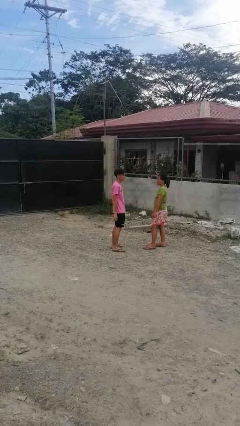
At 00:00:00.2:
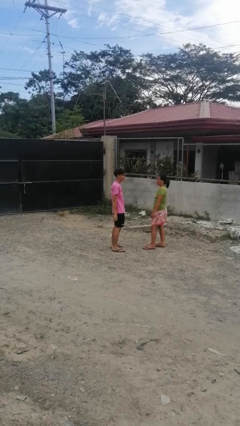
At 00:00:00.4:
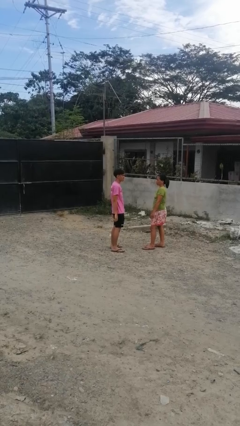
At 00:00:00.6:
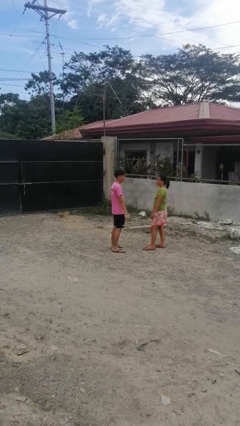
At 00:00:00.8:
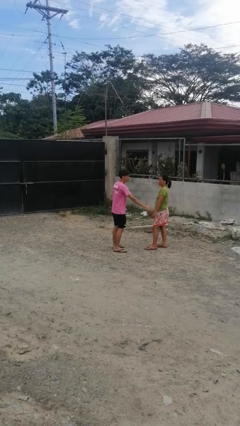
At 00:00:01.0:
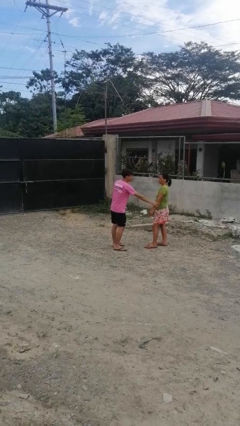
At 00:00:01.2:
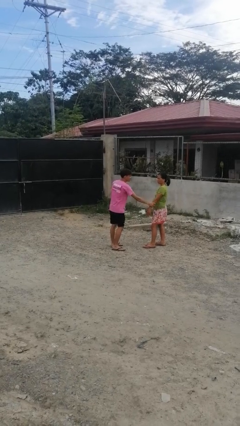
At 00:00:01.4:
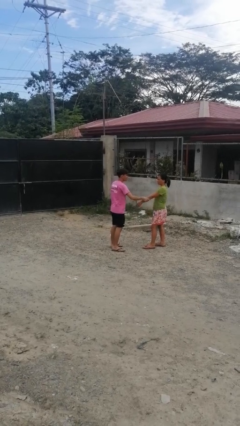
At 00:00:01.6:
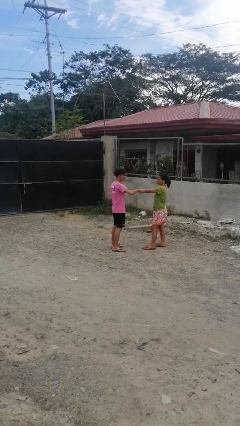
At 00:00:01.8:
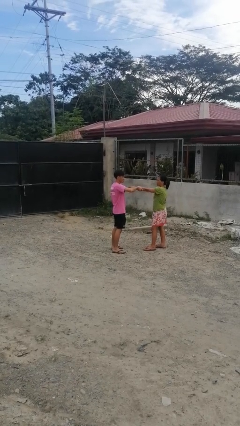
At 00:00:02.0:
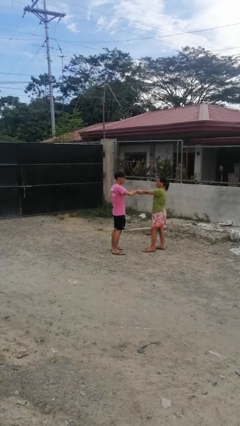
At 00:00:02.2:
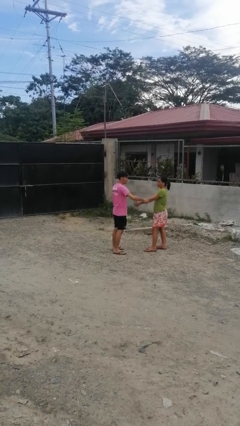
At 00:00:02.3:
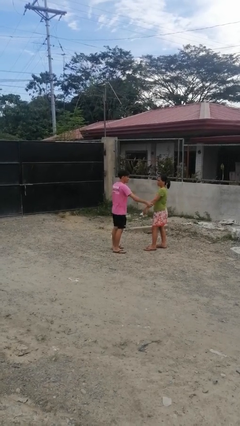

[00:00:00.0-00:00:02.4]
person grabs person by forearm

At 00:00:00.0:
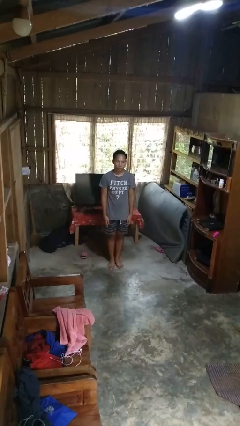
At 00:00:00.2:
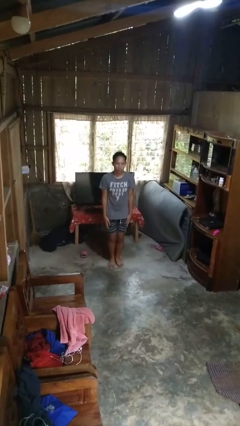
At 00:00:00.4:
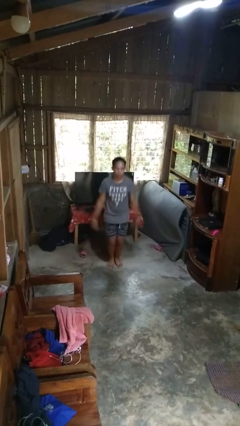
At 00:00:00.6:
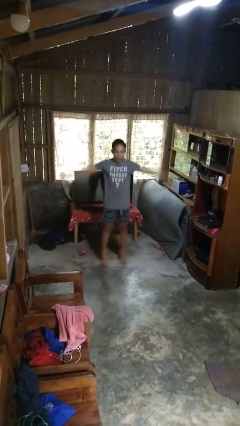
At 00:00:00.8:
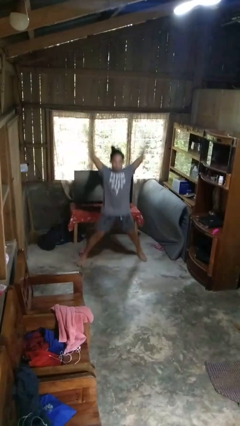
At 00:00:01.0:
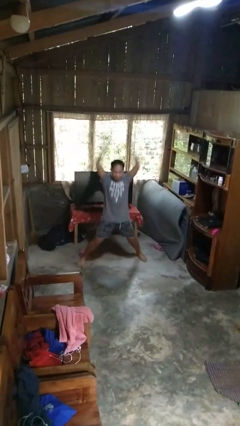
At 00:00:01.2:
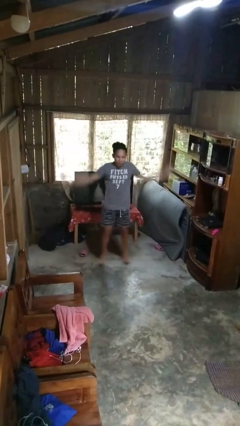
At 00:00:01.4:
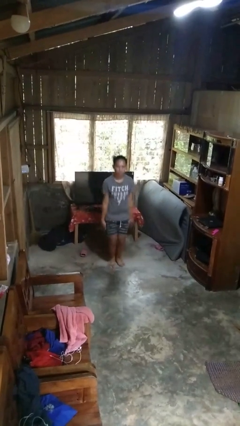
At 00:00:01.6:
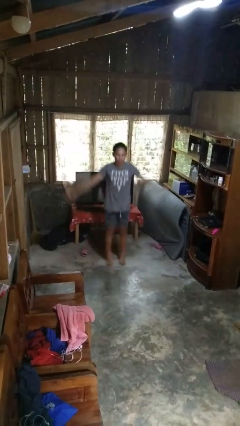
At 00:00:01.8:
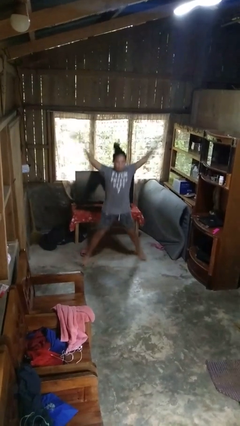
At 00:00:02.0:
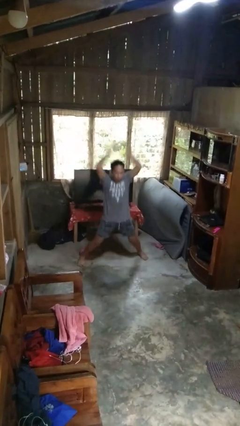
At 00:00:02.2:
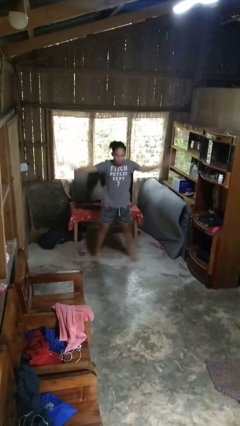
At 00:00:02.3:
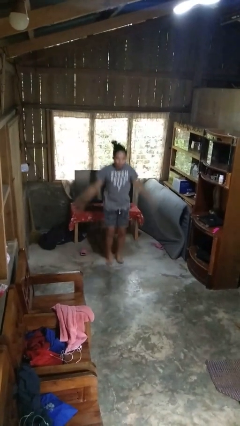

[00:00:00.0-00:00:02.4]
person exercises with jumping jacks

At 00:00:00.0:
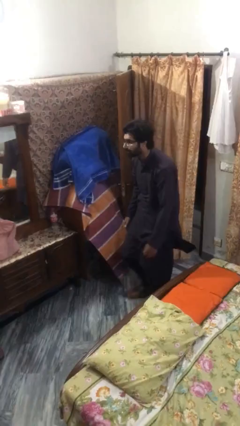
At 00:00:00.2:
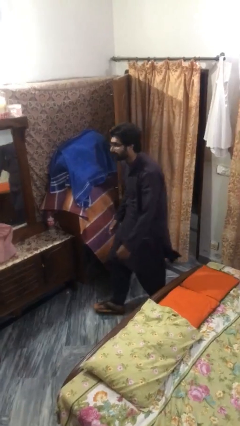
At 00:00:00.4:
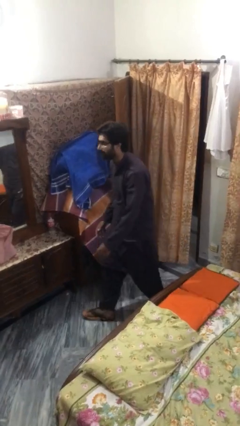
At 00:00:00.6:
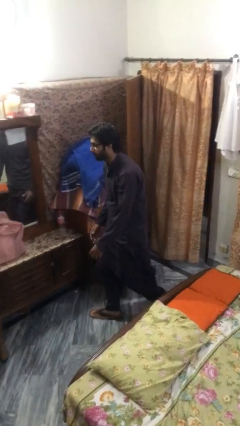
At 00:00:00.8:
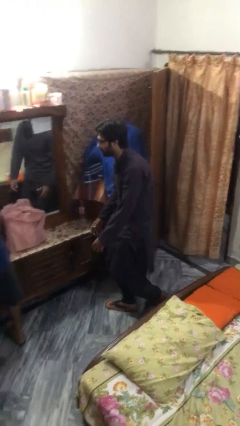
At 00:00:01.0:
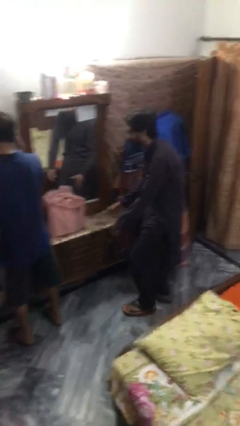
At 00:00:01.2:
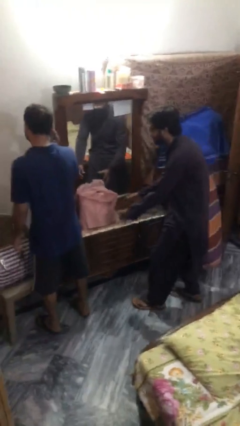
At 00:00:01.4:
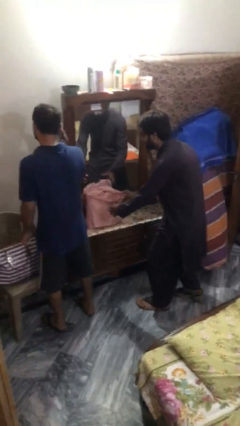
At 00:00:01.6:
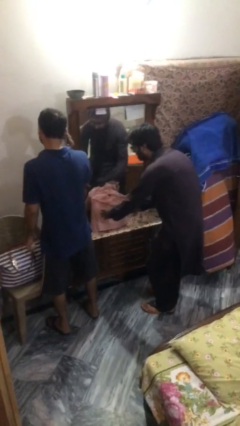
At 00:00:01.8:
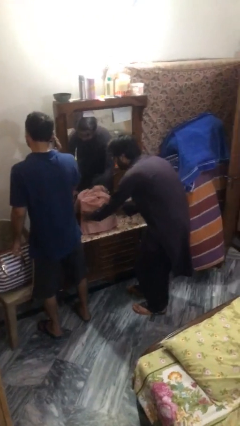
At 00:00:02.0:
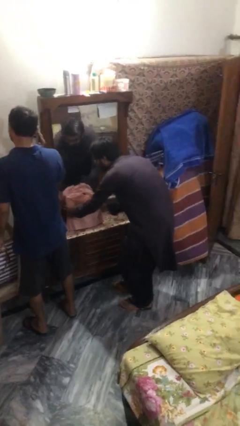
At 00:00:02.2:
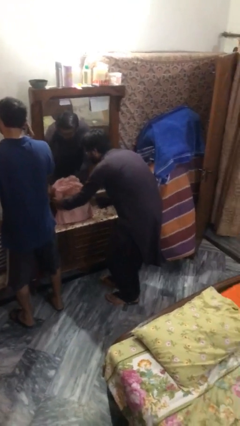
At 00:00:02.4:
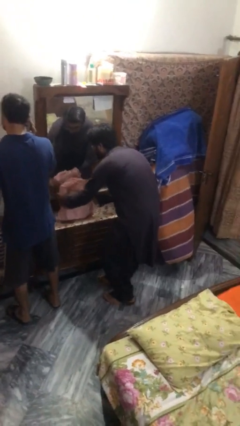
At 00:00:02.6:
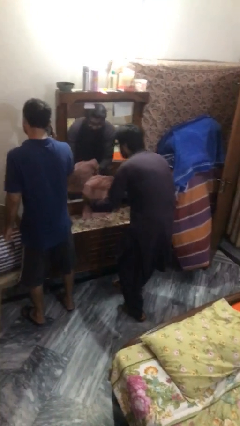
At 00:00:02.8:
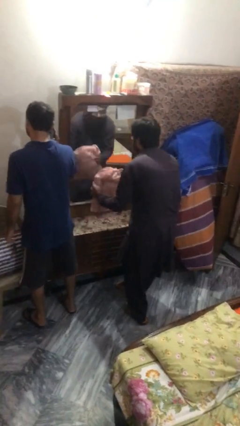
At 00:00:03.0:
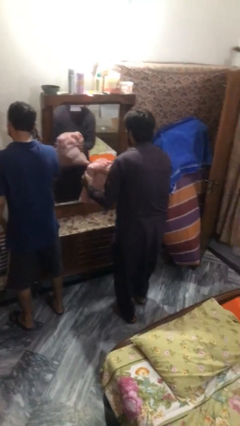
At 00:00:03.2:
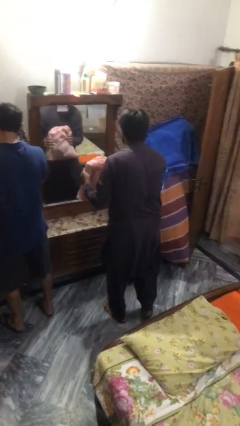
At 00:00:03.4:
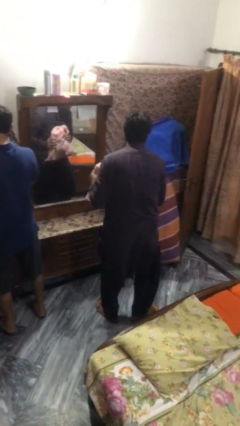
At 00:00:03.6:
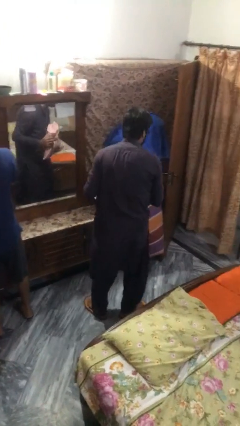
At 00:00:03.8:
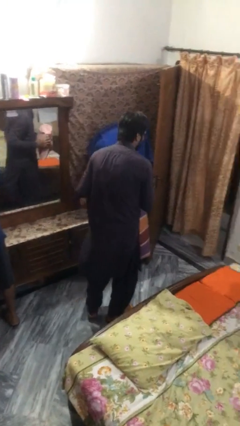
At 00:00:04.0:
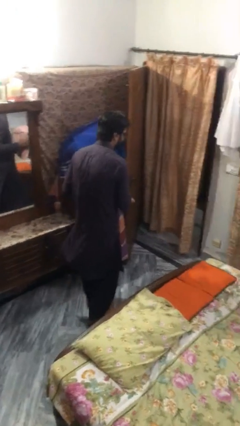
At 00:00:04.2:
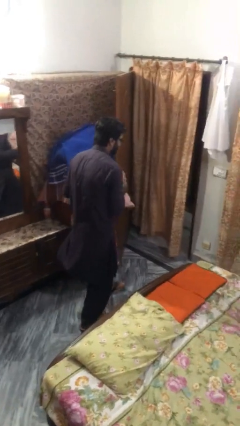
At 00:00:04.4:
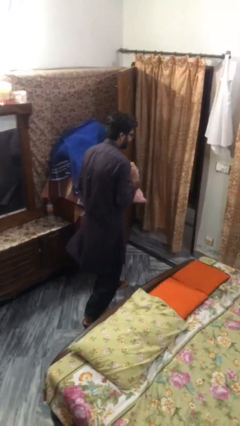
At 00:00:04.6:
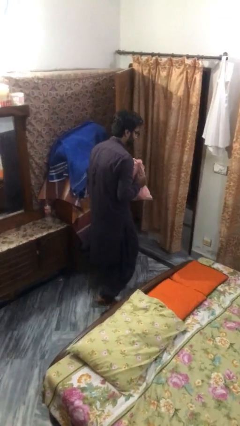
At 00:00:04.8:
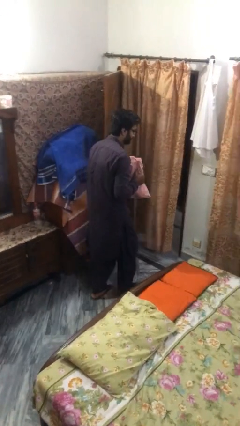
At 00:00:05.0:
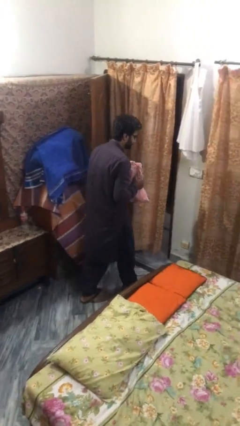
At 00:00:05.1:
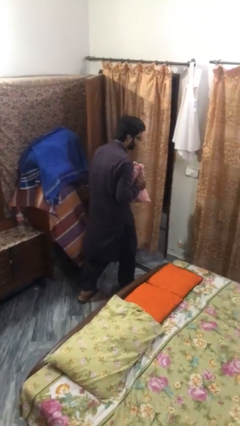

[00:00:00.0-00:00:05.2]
person steals object from person

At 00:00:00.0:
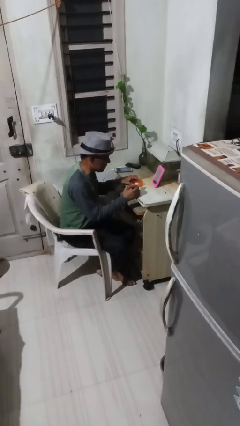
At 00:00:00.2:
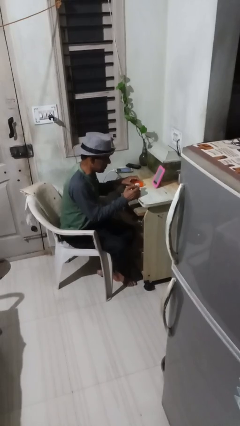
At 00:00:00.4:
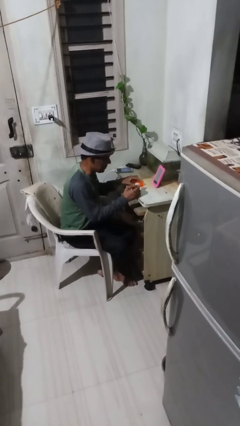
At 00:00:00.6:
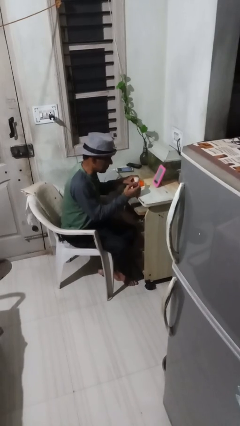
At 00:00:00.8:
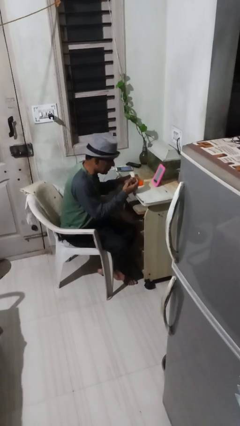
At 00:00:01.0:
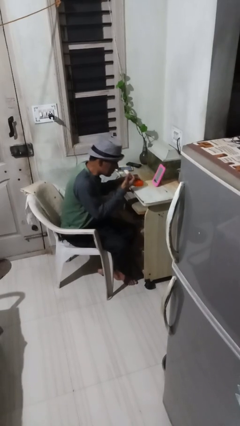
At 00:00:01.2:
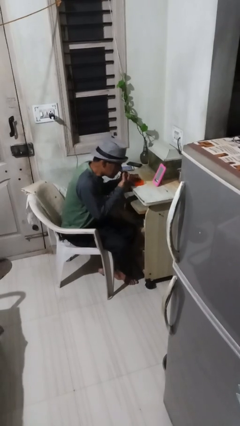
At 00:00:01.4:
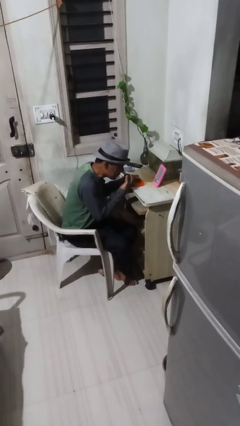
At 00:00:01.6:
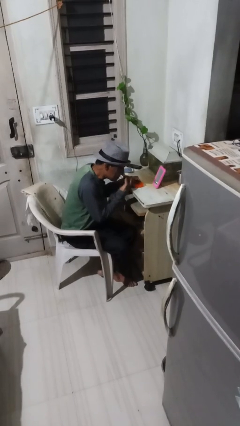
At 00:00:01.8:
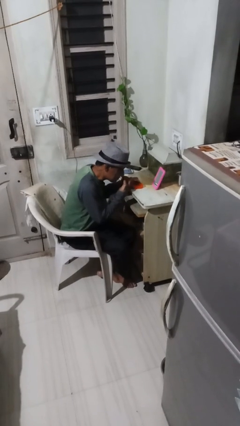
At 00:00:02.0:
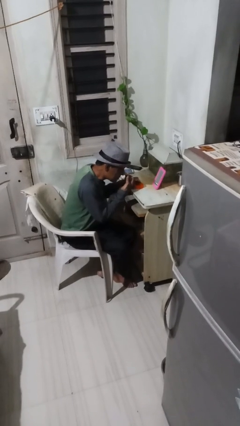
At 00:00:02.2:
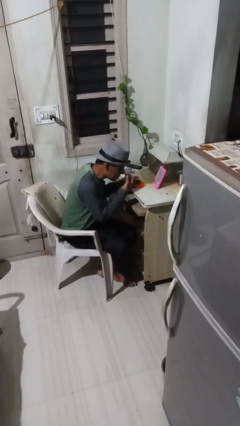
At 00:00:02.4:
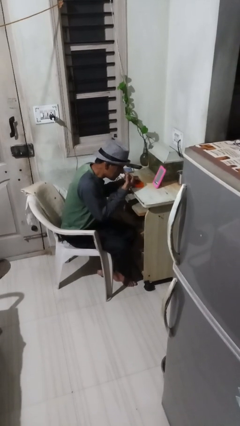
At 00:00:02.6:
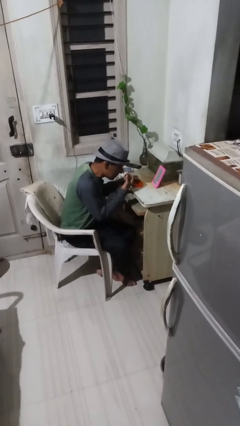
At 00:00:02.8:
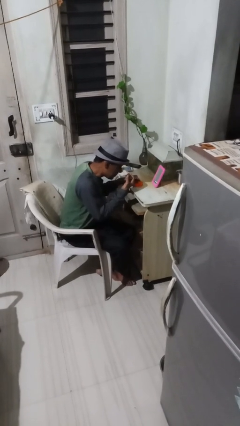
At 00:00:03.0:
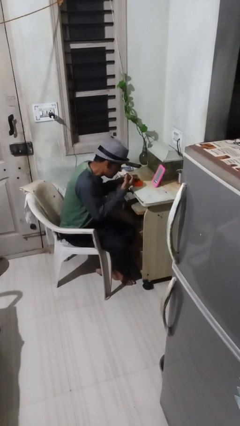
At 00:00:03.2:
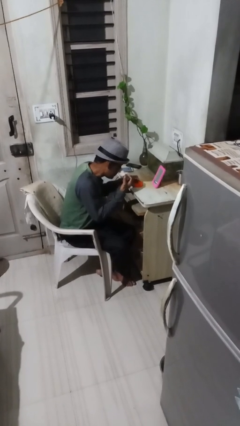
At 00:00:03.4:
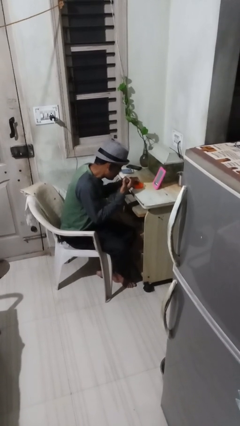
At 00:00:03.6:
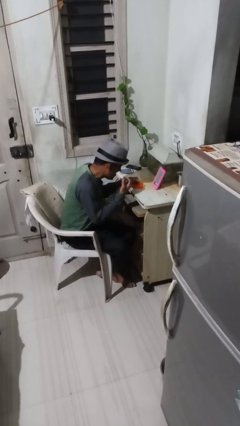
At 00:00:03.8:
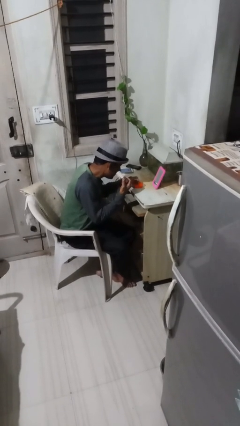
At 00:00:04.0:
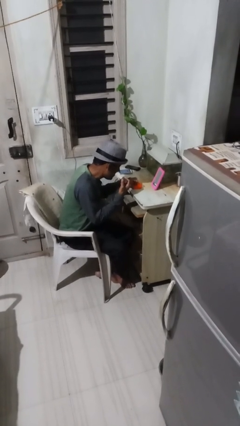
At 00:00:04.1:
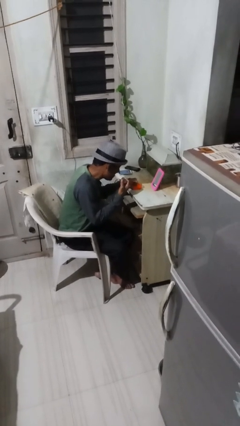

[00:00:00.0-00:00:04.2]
person applies foundation makeup

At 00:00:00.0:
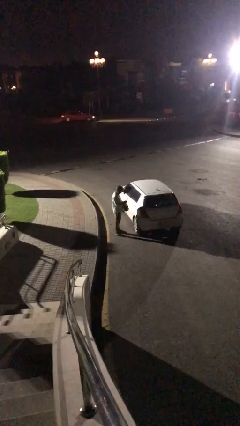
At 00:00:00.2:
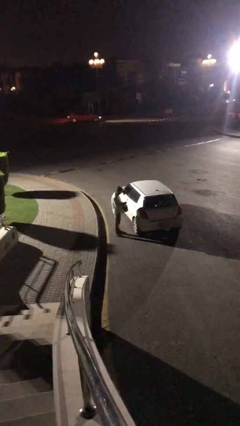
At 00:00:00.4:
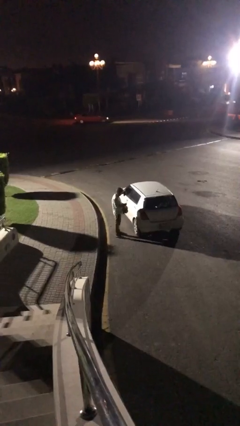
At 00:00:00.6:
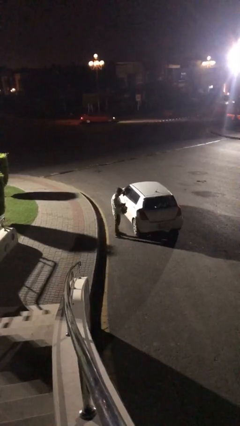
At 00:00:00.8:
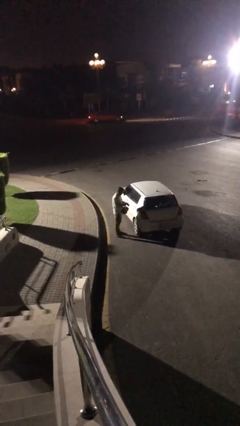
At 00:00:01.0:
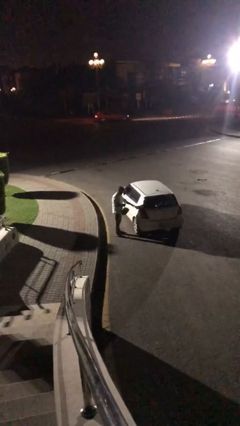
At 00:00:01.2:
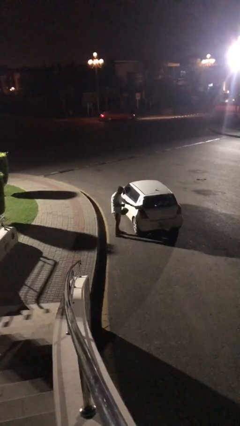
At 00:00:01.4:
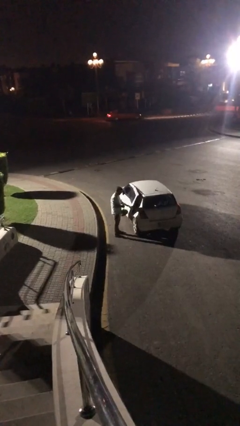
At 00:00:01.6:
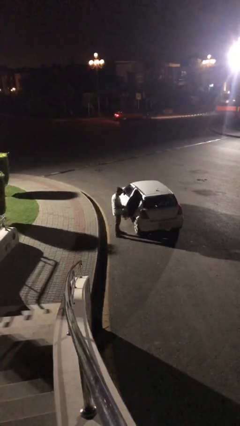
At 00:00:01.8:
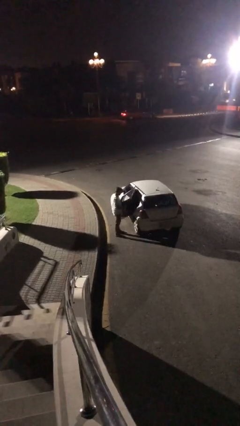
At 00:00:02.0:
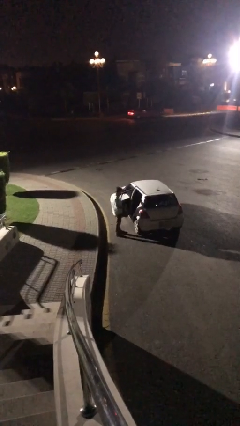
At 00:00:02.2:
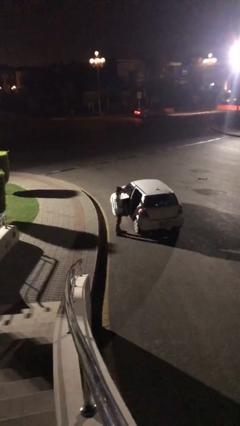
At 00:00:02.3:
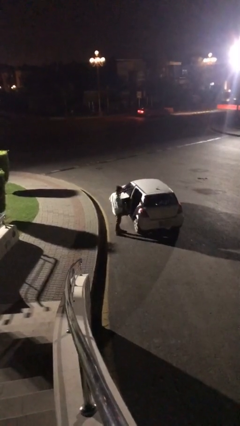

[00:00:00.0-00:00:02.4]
person opens car door

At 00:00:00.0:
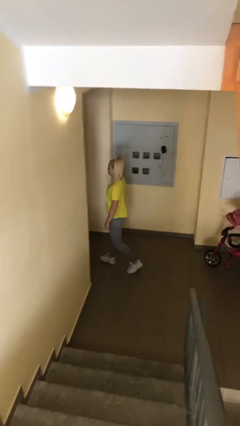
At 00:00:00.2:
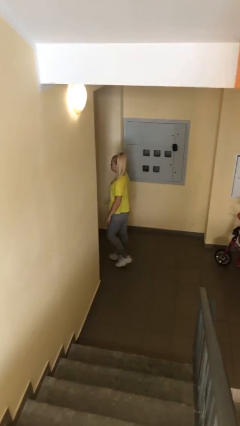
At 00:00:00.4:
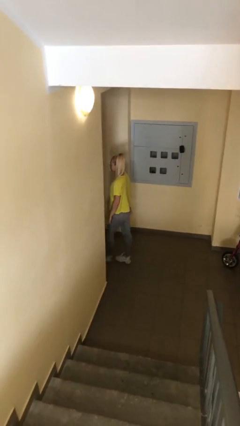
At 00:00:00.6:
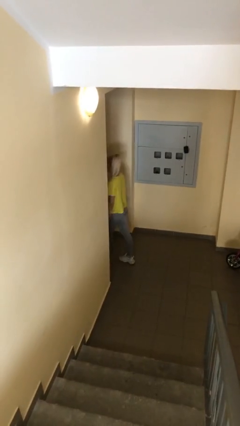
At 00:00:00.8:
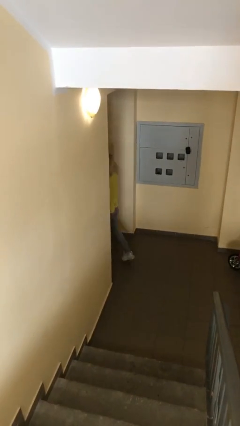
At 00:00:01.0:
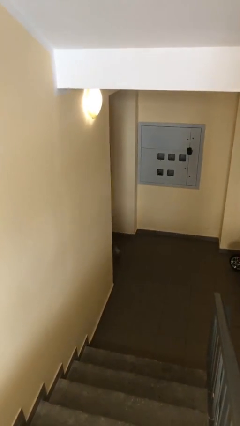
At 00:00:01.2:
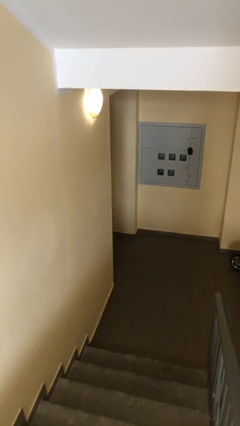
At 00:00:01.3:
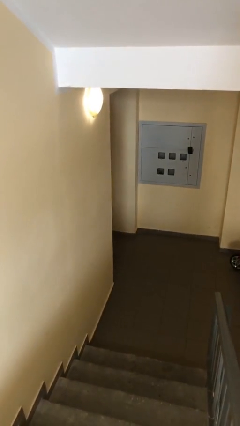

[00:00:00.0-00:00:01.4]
person exits scene through structure
